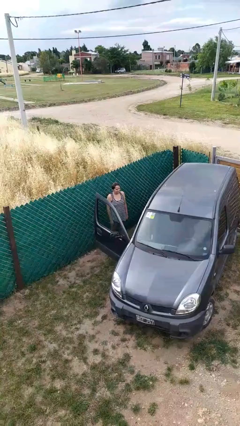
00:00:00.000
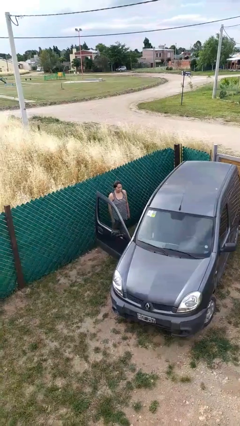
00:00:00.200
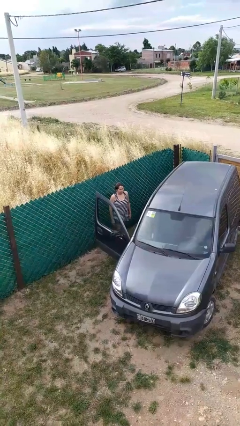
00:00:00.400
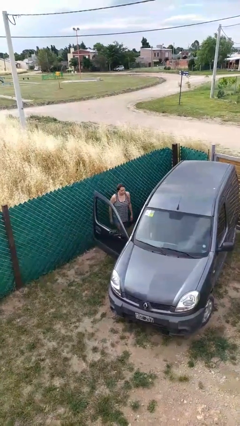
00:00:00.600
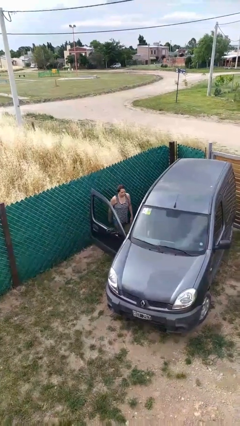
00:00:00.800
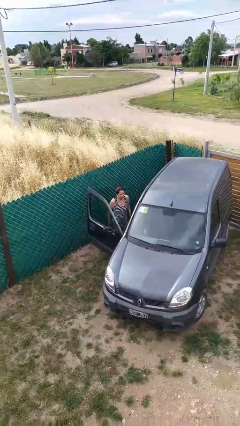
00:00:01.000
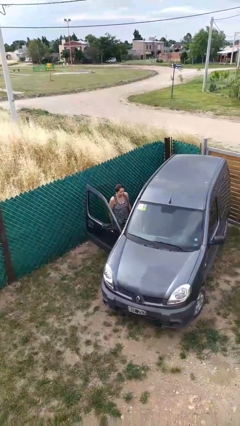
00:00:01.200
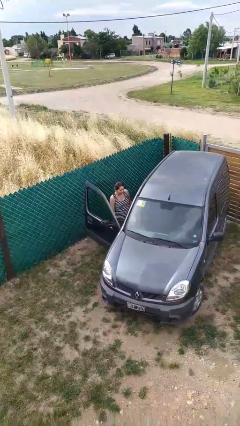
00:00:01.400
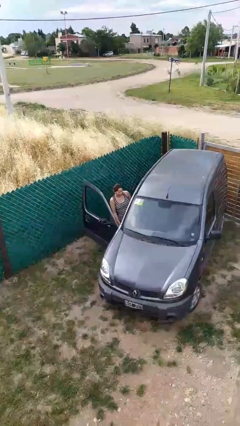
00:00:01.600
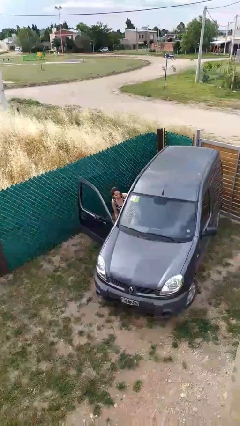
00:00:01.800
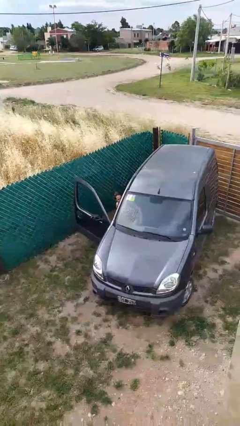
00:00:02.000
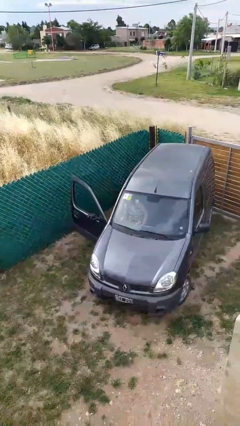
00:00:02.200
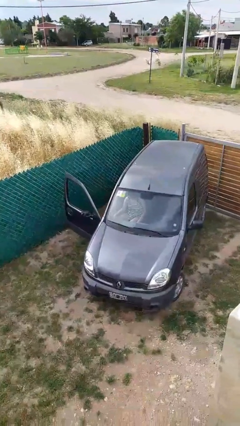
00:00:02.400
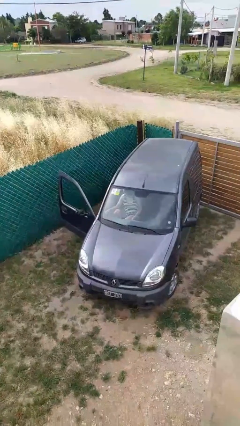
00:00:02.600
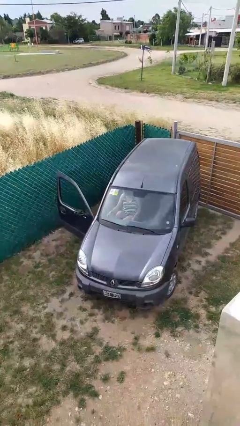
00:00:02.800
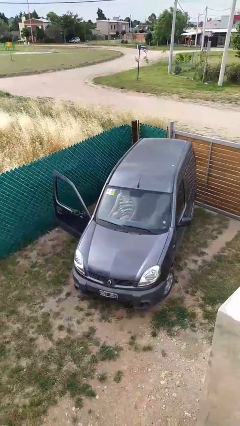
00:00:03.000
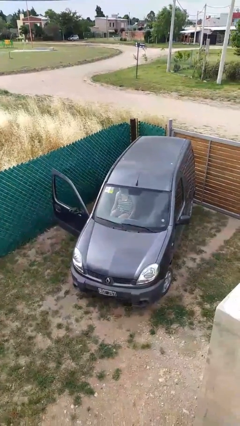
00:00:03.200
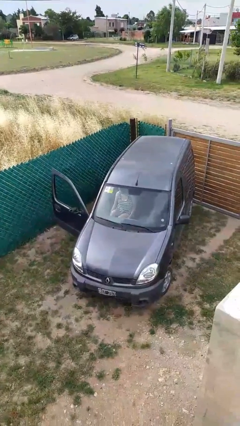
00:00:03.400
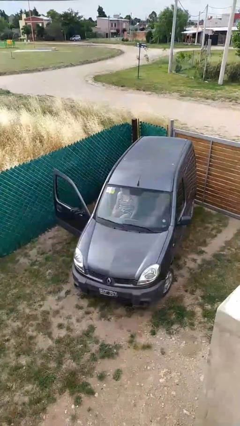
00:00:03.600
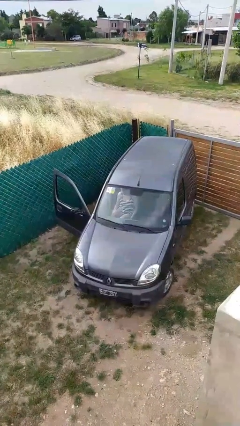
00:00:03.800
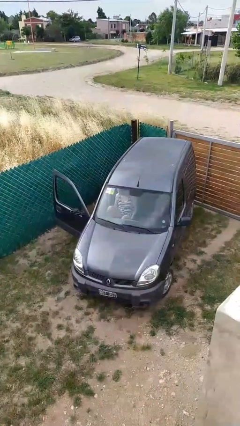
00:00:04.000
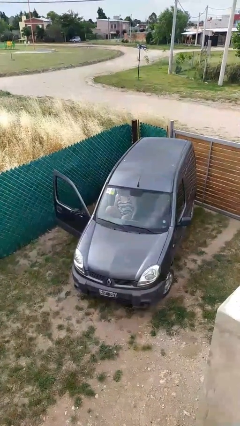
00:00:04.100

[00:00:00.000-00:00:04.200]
person enters car

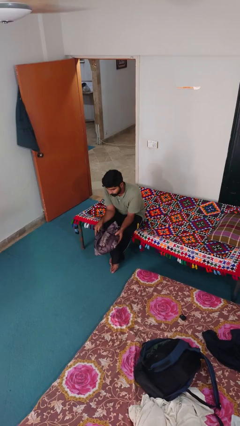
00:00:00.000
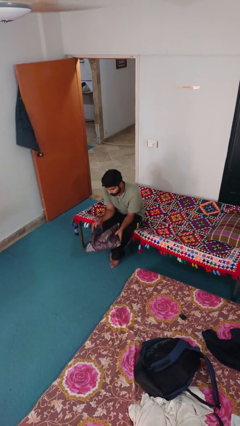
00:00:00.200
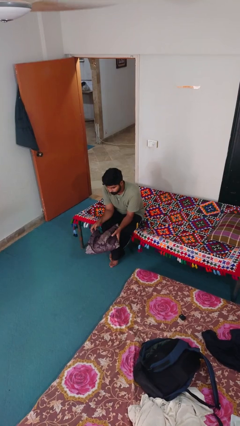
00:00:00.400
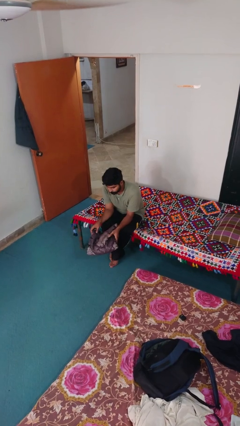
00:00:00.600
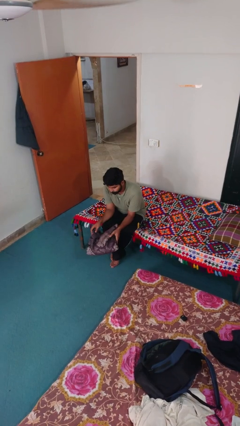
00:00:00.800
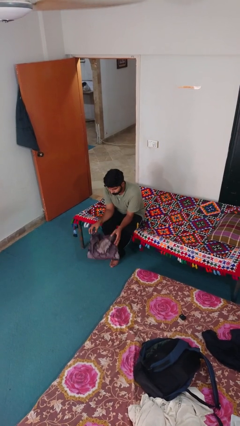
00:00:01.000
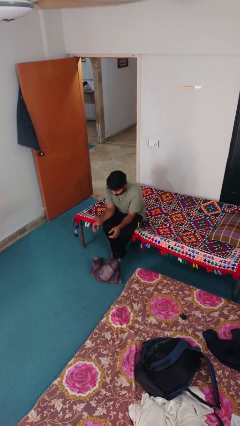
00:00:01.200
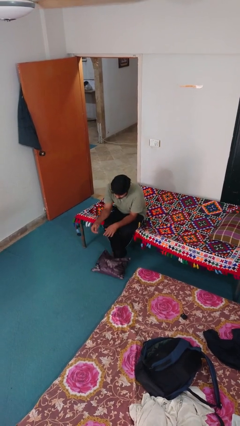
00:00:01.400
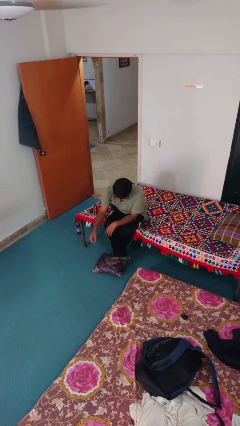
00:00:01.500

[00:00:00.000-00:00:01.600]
person drops object

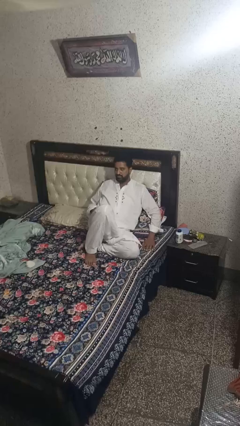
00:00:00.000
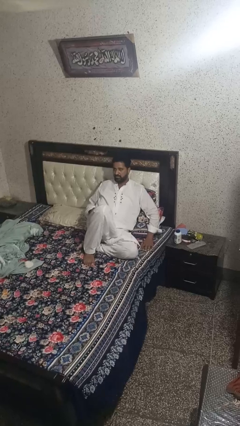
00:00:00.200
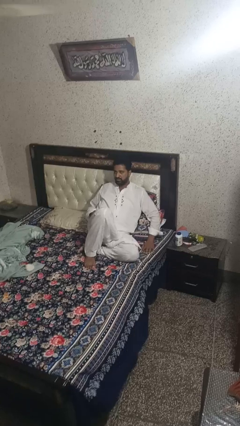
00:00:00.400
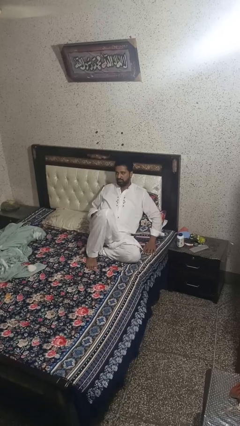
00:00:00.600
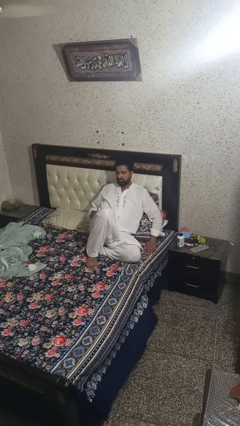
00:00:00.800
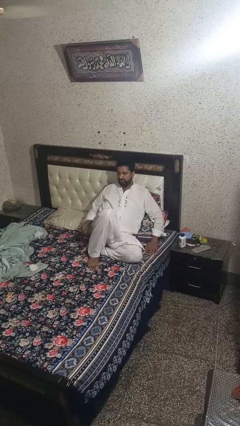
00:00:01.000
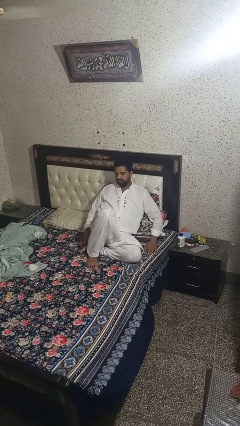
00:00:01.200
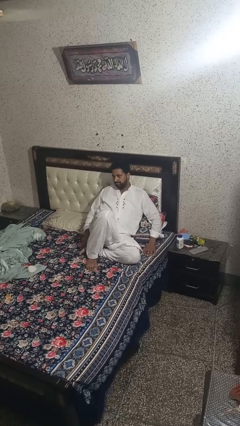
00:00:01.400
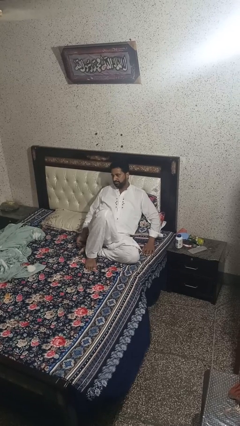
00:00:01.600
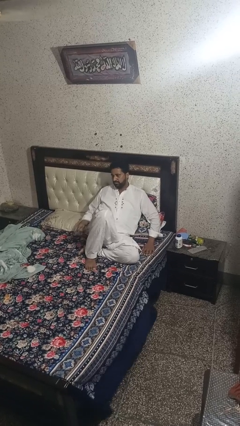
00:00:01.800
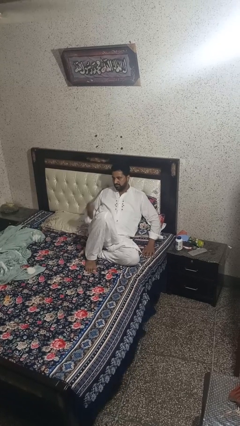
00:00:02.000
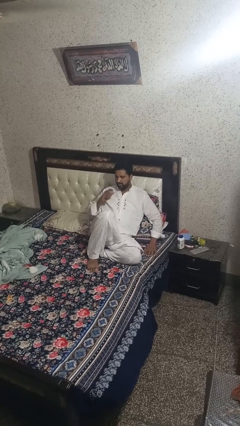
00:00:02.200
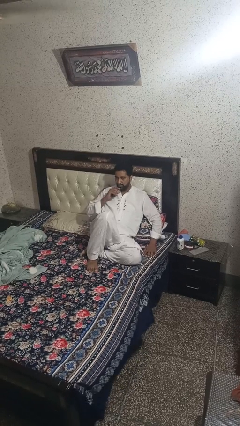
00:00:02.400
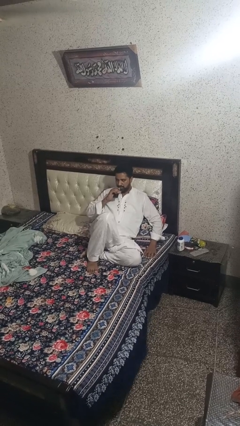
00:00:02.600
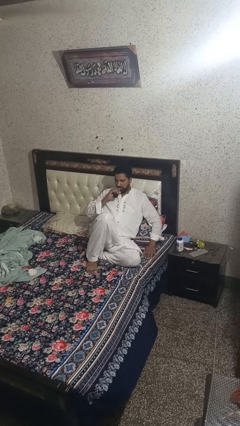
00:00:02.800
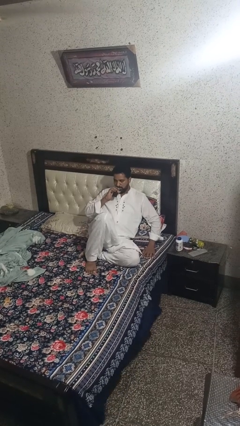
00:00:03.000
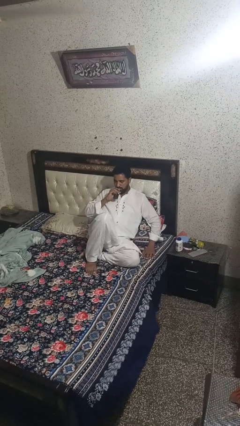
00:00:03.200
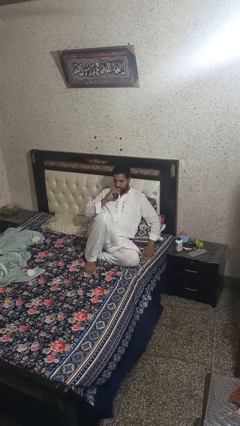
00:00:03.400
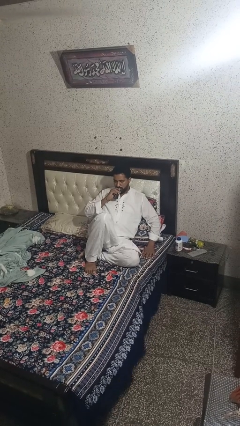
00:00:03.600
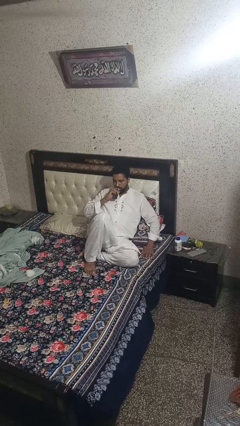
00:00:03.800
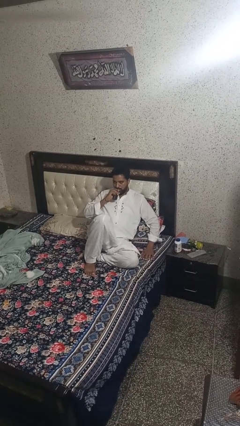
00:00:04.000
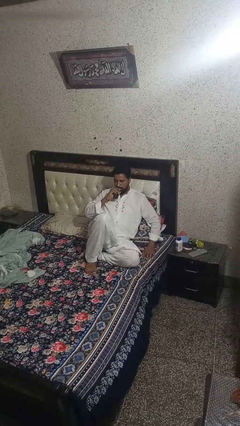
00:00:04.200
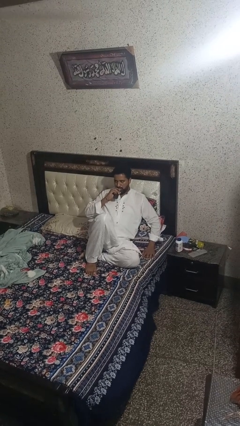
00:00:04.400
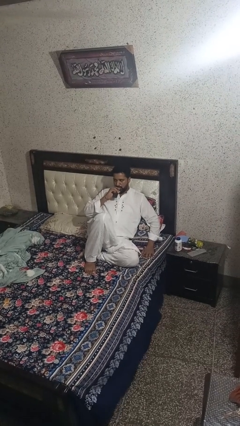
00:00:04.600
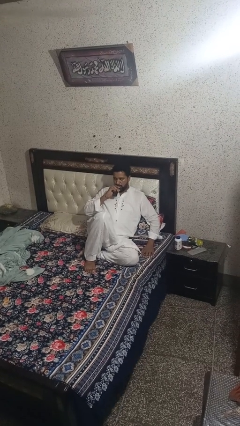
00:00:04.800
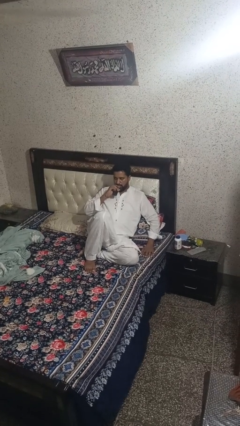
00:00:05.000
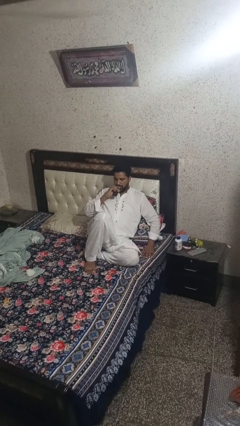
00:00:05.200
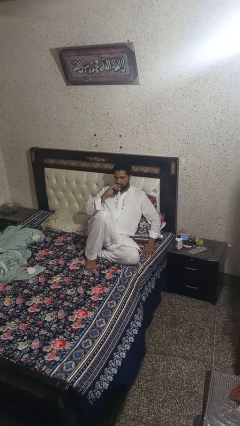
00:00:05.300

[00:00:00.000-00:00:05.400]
person vapes

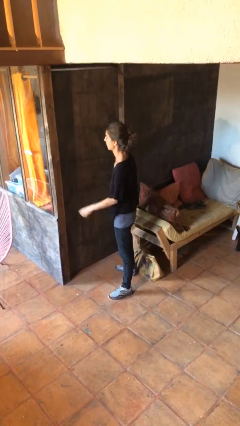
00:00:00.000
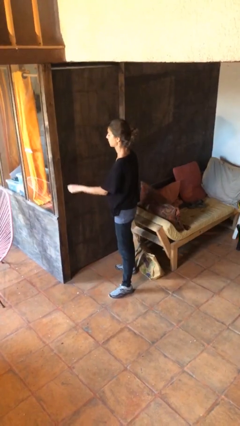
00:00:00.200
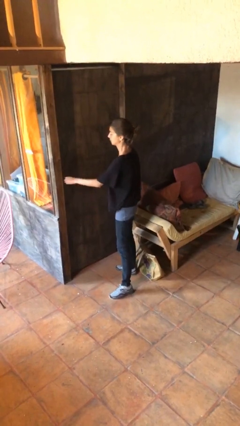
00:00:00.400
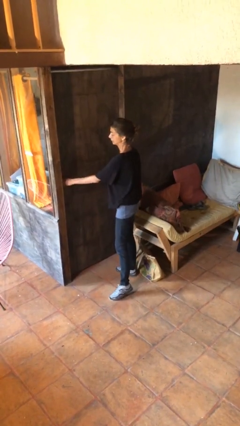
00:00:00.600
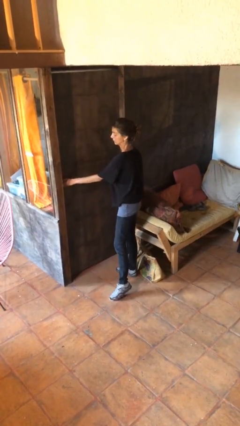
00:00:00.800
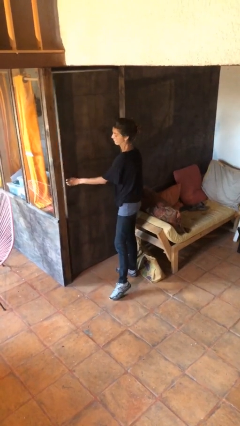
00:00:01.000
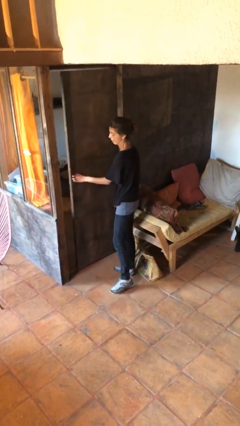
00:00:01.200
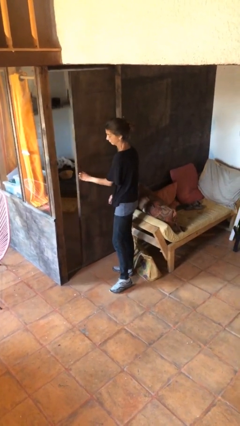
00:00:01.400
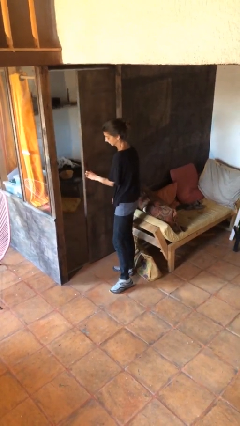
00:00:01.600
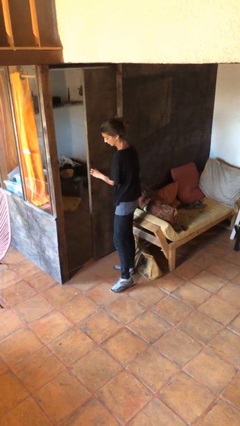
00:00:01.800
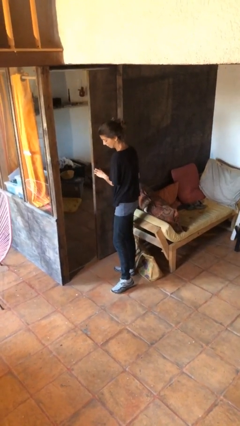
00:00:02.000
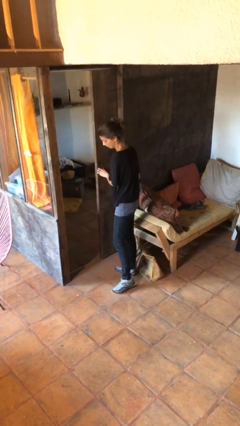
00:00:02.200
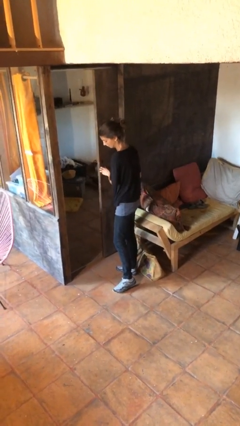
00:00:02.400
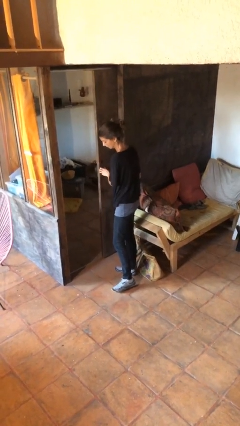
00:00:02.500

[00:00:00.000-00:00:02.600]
person opens facility door

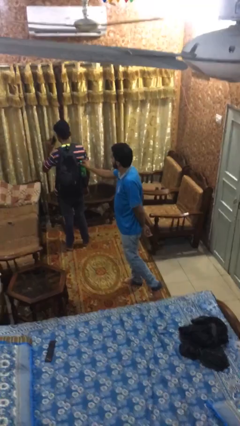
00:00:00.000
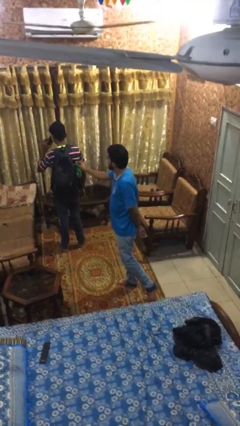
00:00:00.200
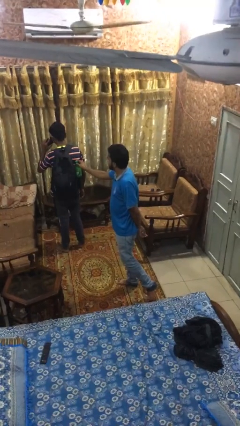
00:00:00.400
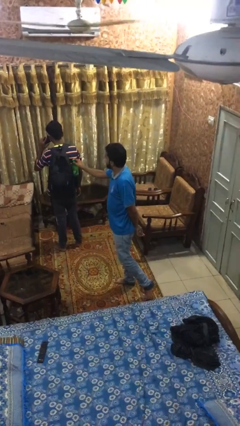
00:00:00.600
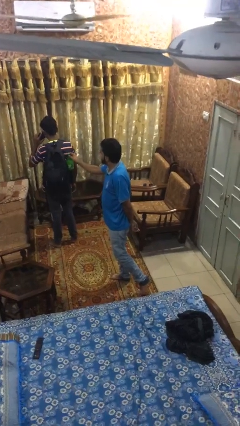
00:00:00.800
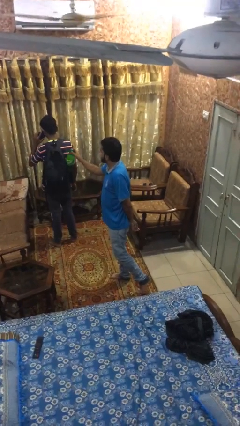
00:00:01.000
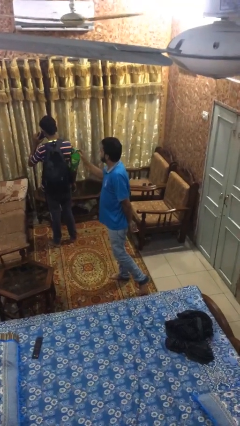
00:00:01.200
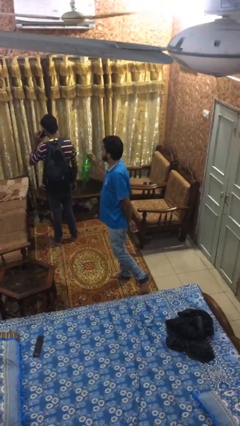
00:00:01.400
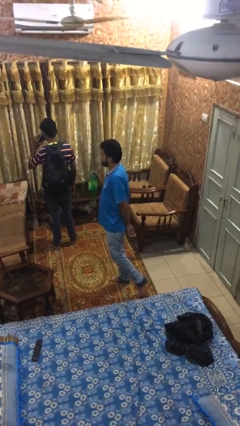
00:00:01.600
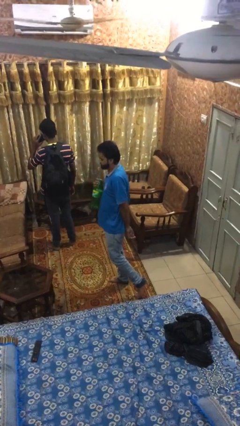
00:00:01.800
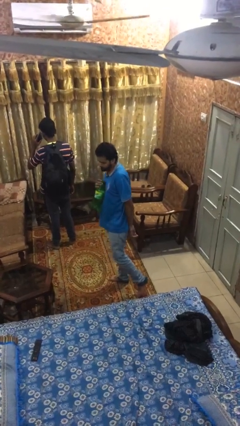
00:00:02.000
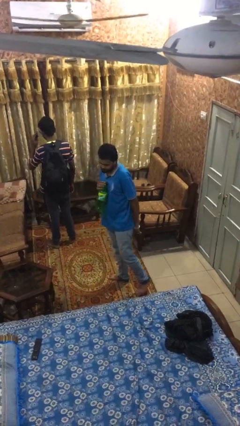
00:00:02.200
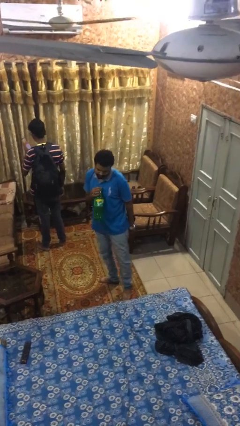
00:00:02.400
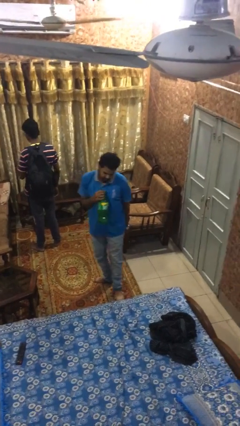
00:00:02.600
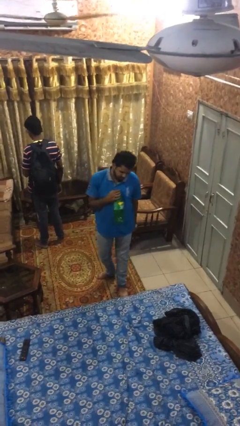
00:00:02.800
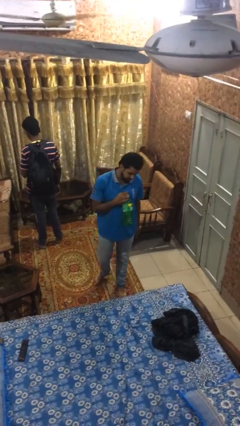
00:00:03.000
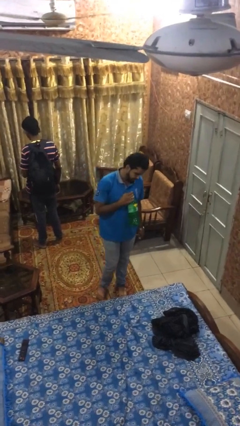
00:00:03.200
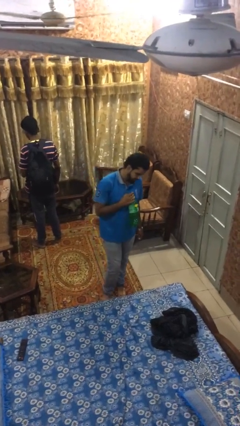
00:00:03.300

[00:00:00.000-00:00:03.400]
person steals object from person

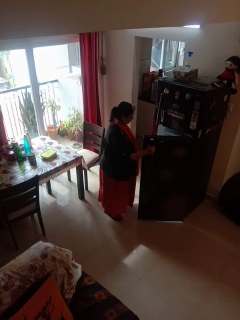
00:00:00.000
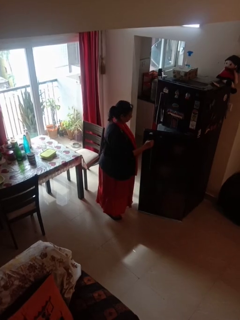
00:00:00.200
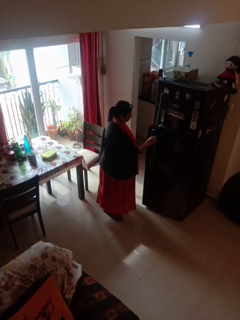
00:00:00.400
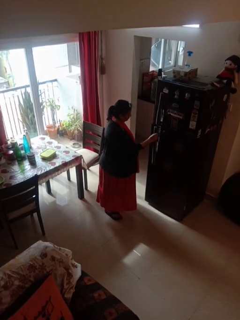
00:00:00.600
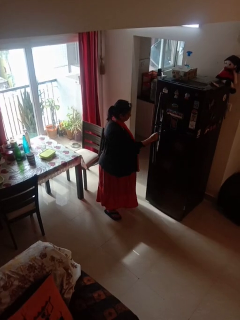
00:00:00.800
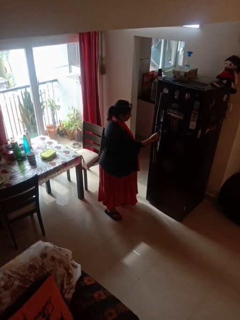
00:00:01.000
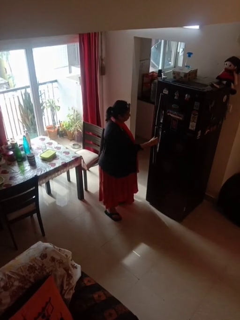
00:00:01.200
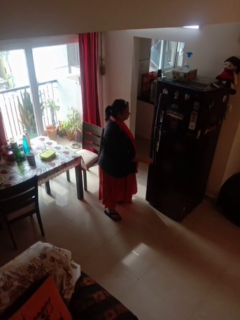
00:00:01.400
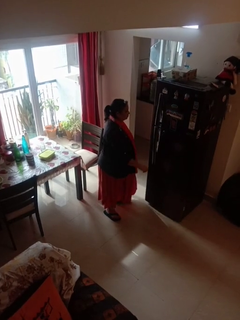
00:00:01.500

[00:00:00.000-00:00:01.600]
person closes refrigerator
